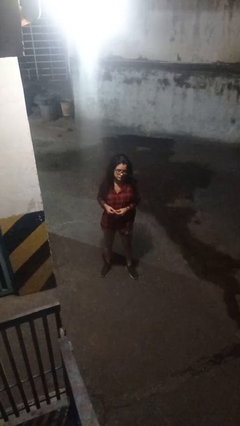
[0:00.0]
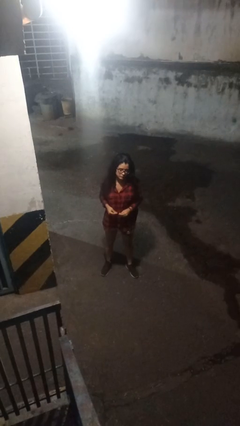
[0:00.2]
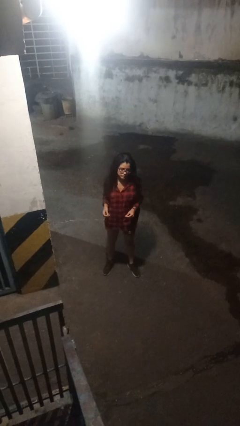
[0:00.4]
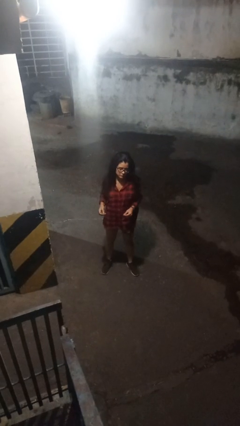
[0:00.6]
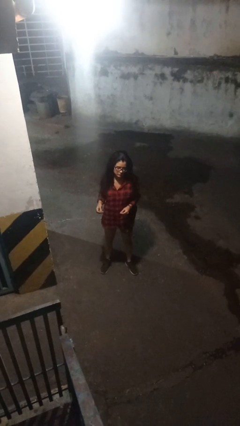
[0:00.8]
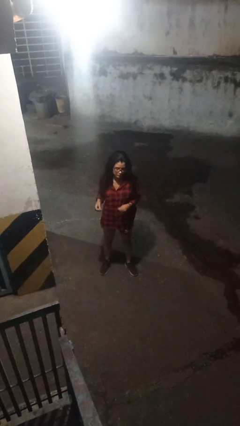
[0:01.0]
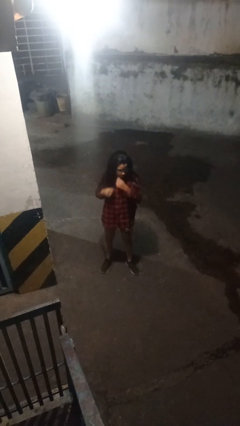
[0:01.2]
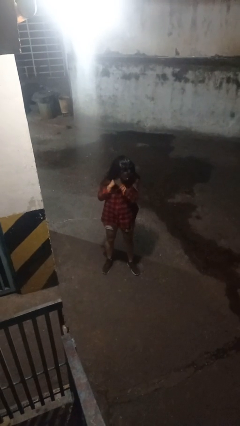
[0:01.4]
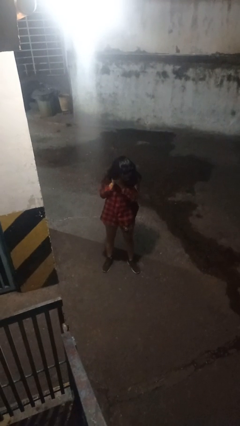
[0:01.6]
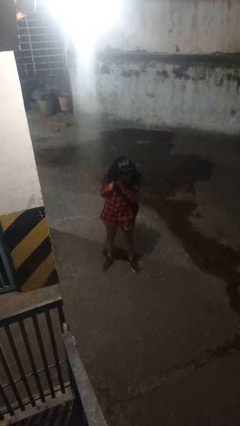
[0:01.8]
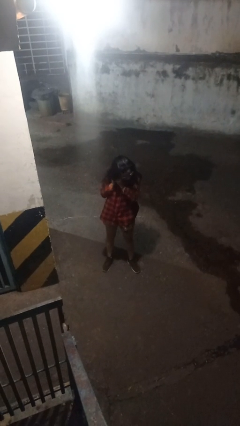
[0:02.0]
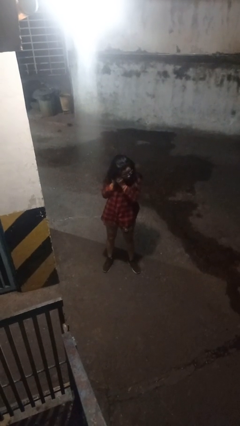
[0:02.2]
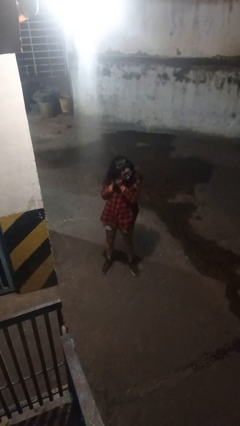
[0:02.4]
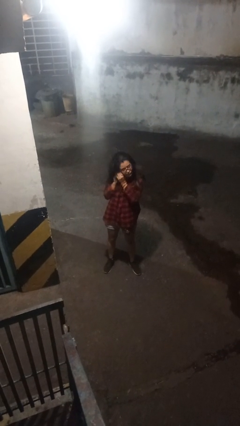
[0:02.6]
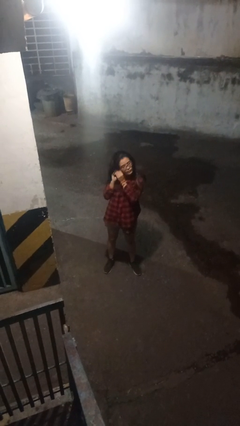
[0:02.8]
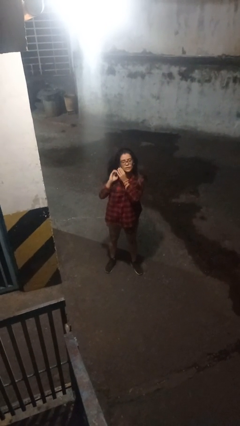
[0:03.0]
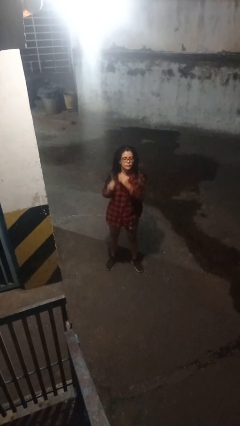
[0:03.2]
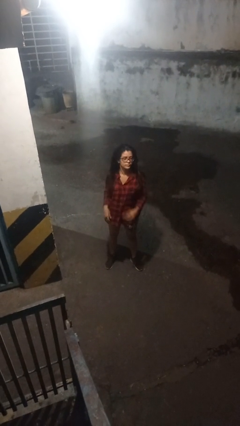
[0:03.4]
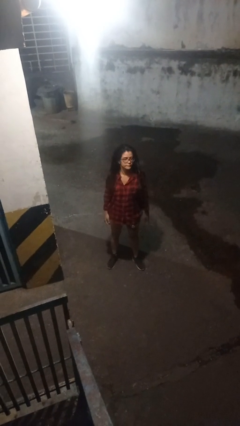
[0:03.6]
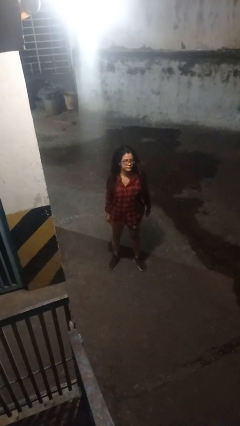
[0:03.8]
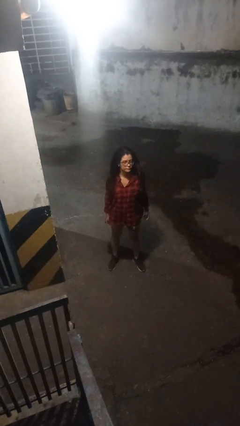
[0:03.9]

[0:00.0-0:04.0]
person puts on earrings

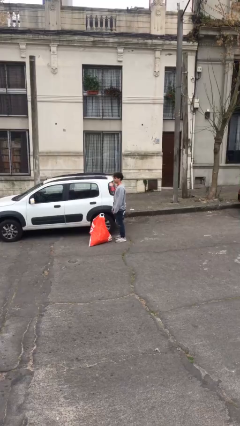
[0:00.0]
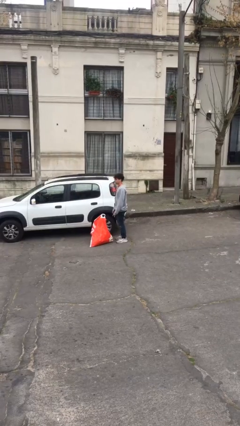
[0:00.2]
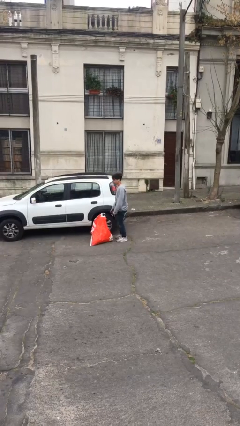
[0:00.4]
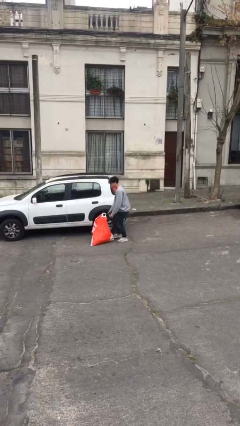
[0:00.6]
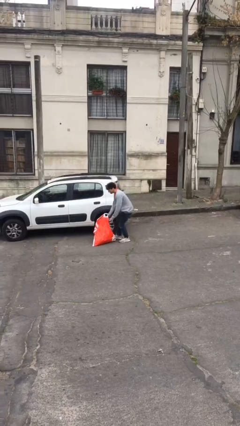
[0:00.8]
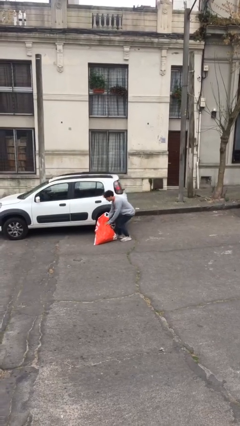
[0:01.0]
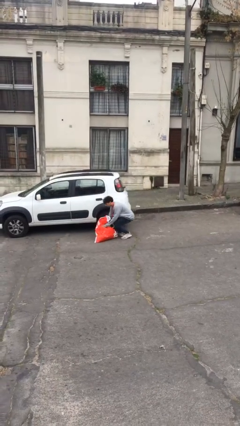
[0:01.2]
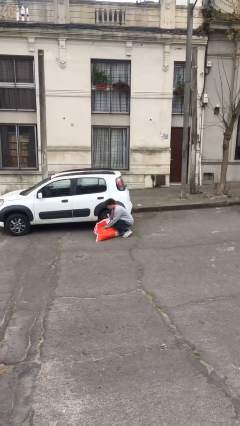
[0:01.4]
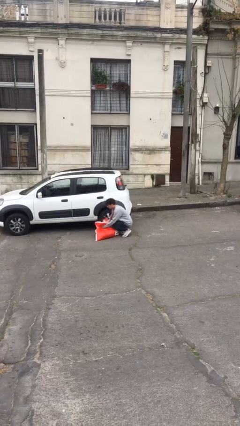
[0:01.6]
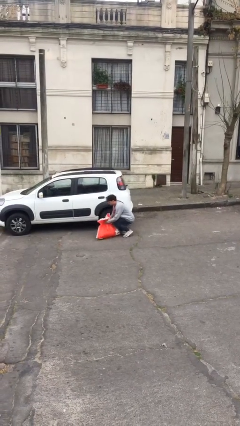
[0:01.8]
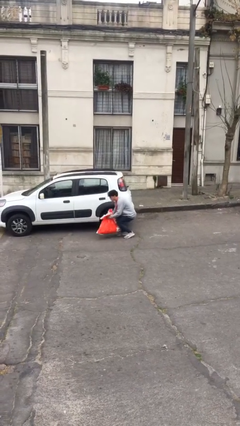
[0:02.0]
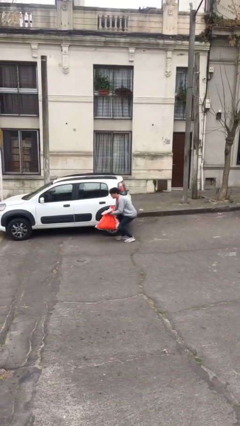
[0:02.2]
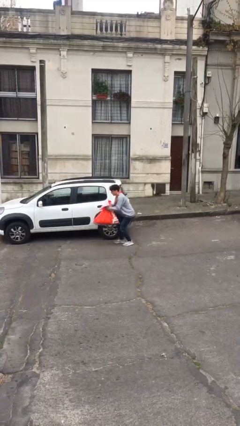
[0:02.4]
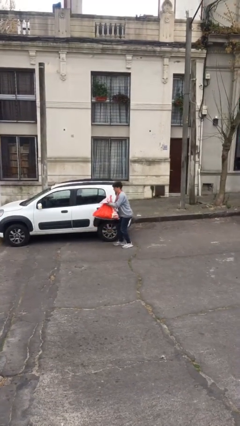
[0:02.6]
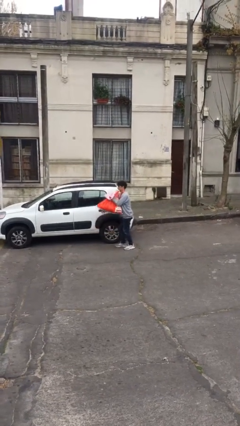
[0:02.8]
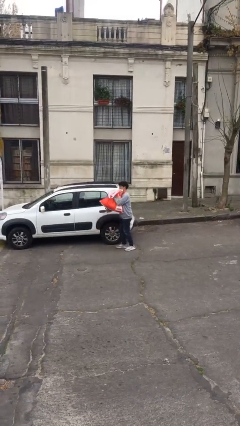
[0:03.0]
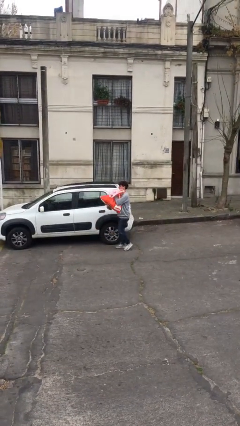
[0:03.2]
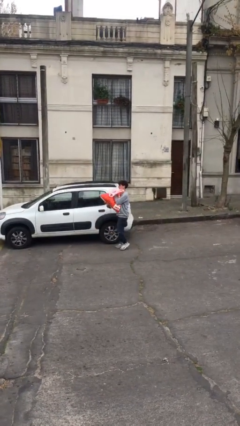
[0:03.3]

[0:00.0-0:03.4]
person picks up object from floor

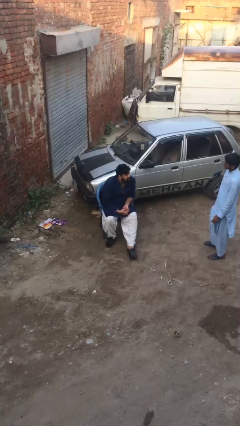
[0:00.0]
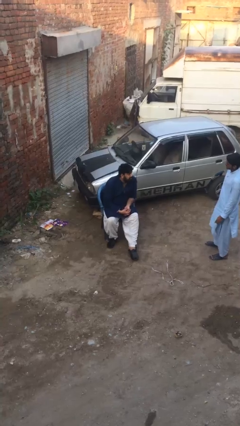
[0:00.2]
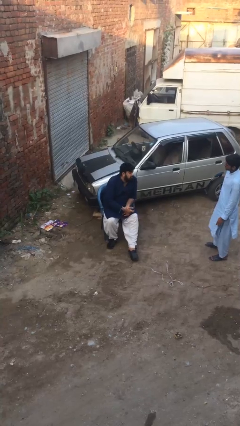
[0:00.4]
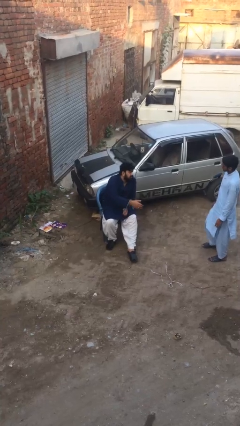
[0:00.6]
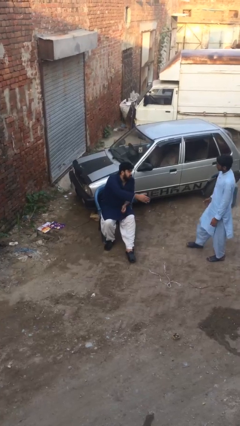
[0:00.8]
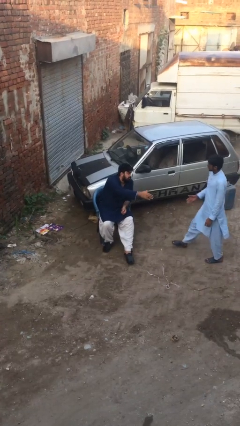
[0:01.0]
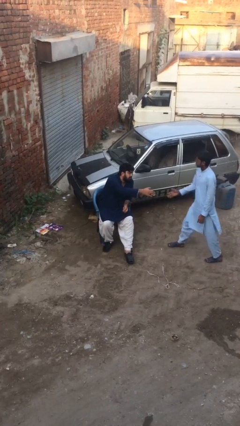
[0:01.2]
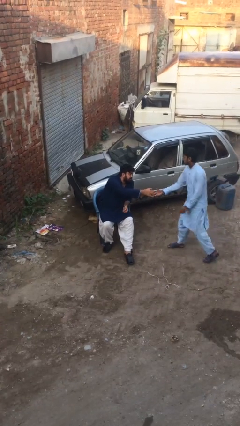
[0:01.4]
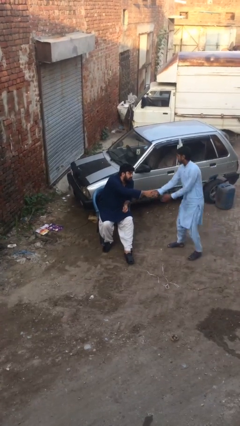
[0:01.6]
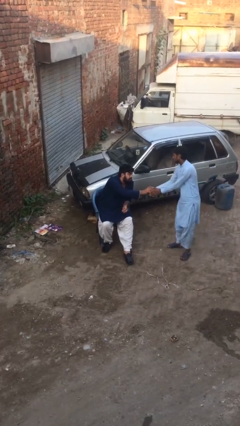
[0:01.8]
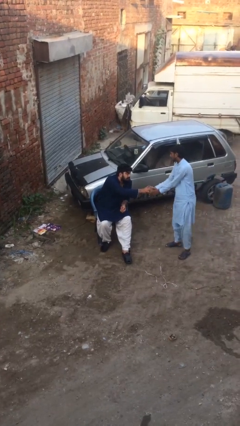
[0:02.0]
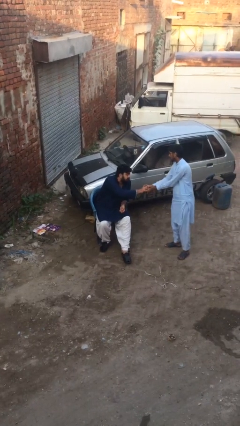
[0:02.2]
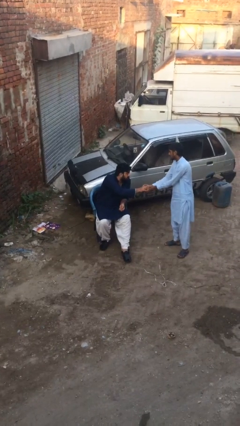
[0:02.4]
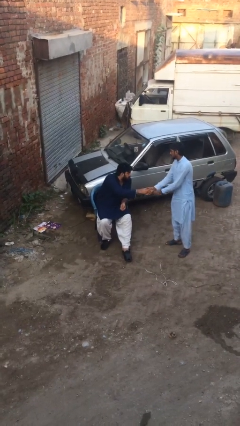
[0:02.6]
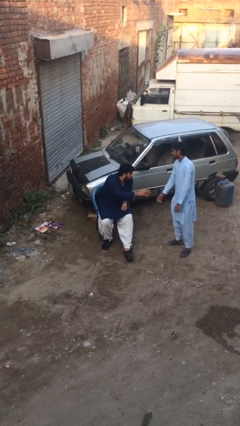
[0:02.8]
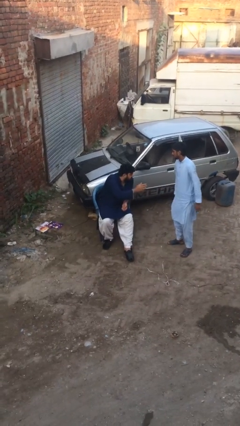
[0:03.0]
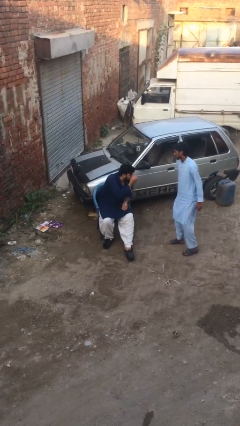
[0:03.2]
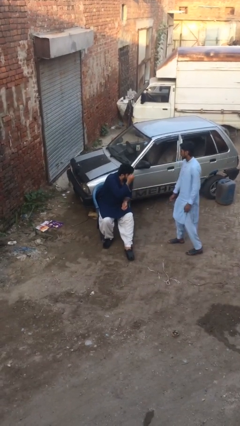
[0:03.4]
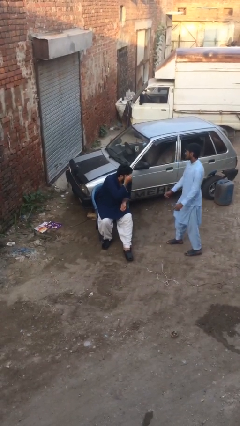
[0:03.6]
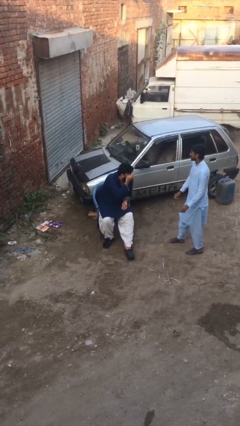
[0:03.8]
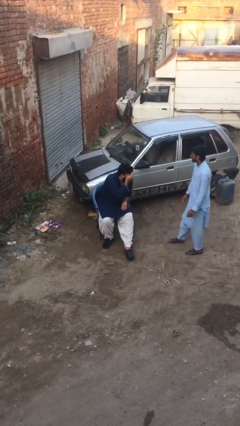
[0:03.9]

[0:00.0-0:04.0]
person shakes hand

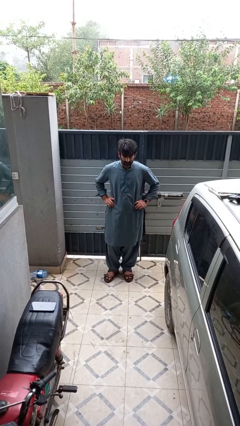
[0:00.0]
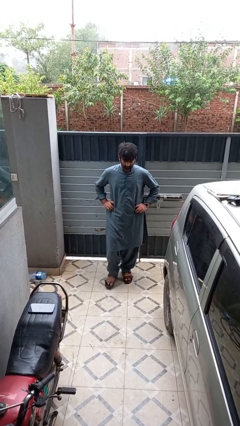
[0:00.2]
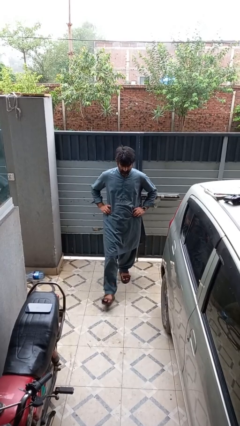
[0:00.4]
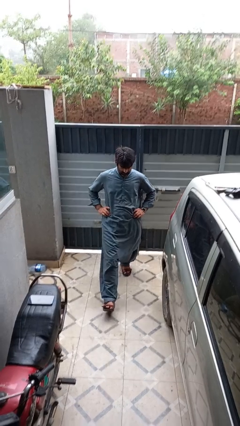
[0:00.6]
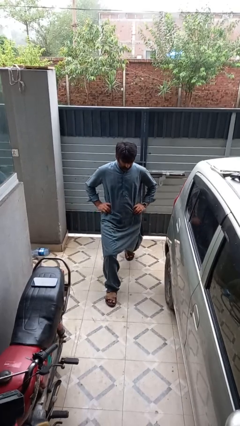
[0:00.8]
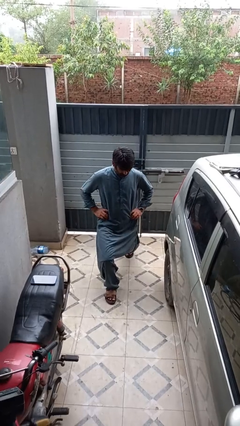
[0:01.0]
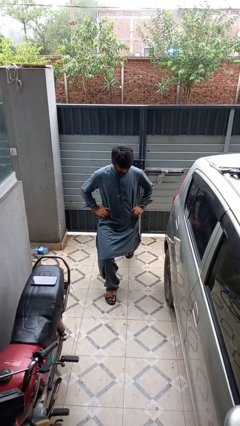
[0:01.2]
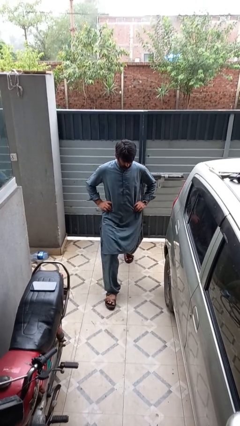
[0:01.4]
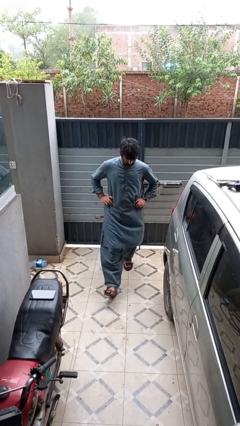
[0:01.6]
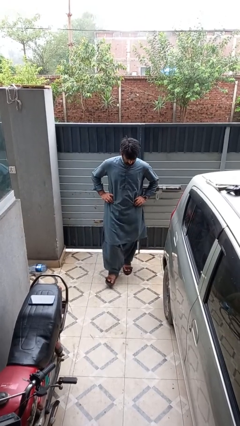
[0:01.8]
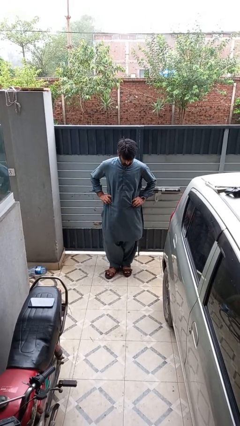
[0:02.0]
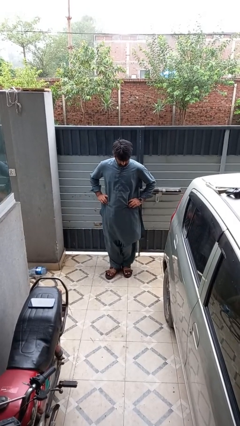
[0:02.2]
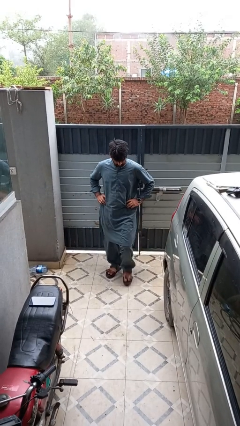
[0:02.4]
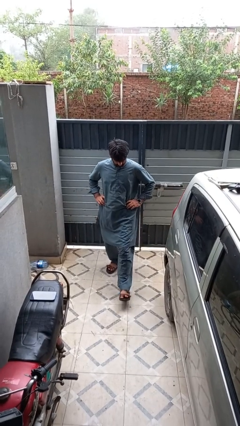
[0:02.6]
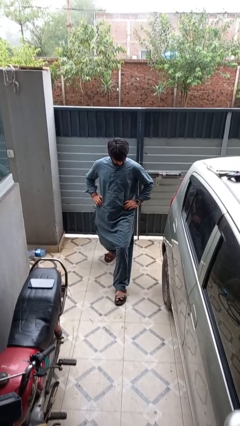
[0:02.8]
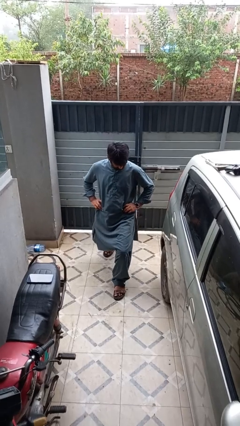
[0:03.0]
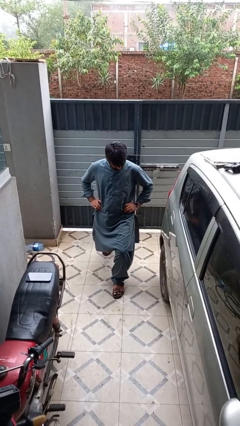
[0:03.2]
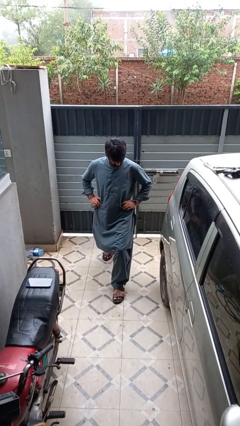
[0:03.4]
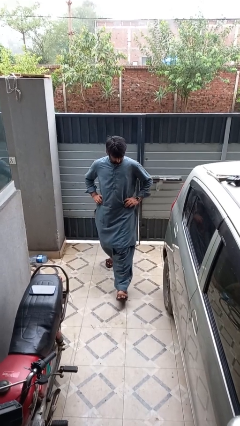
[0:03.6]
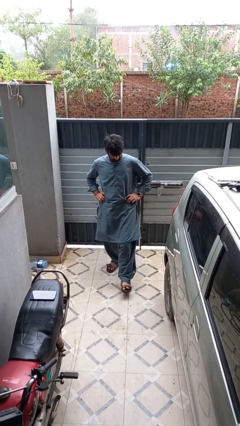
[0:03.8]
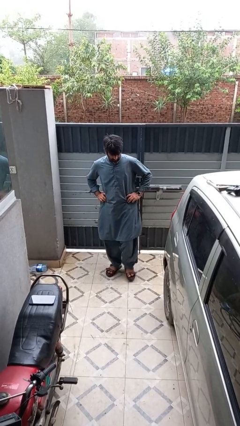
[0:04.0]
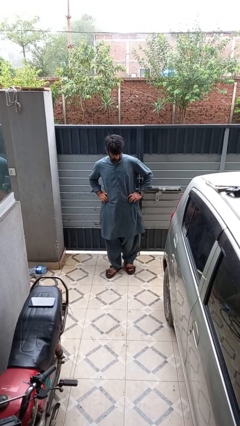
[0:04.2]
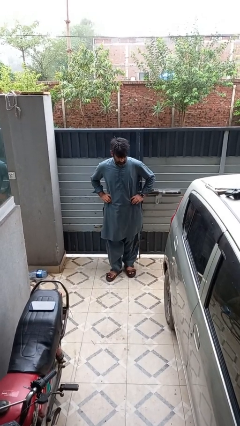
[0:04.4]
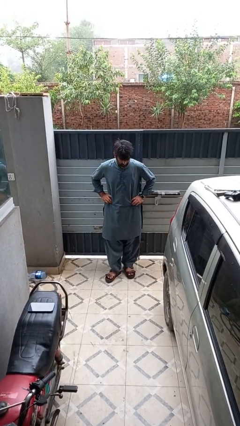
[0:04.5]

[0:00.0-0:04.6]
person exercises with lunges

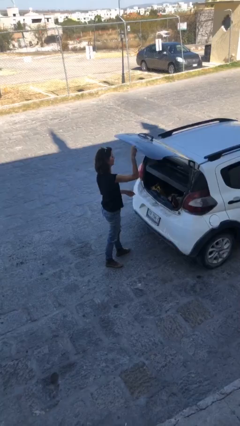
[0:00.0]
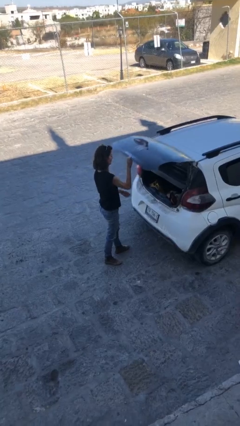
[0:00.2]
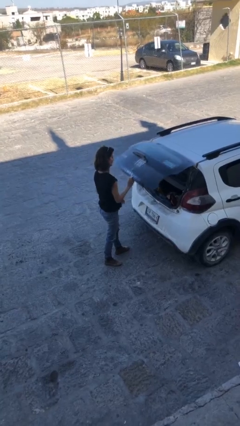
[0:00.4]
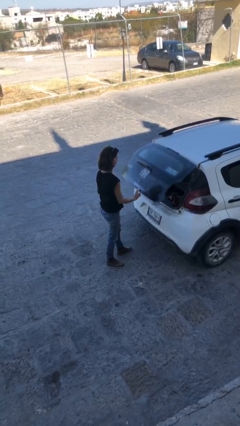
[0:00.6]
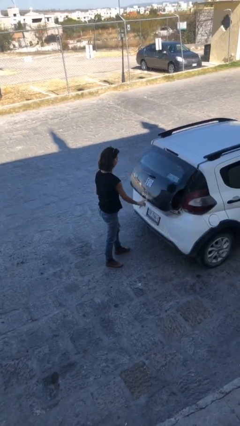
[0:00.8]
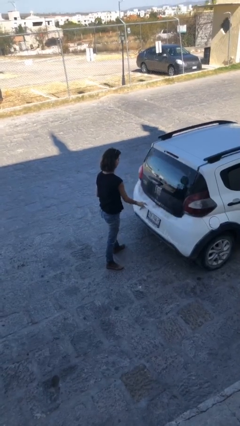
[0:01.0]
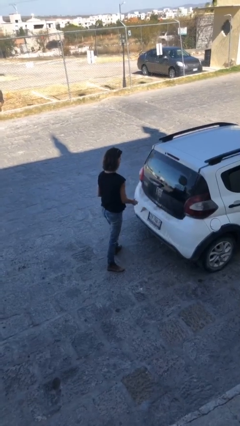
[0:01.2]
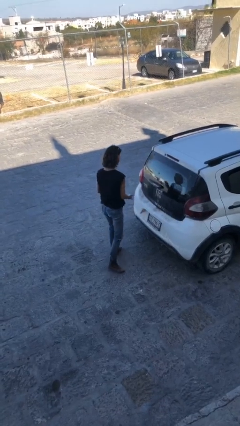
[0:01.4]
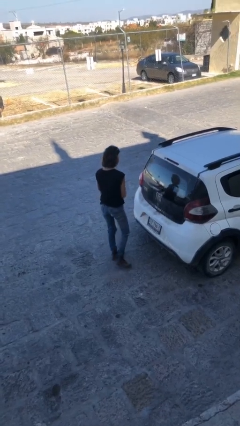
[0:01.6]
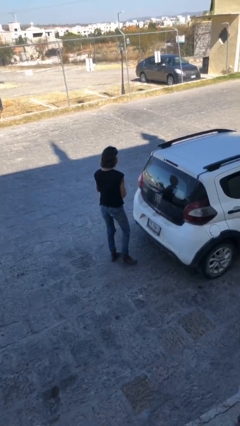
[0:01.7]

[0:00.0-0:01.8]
person closes car trunk
